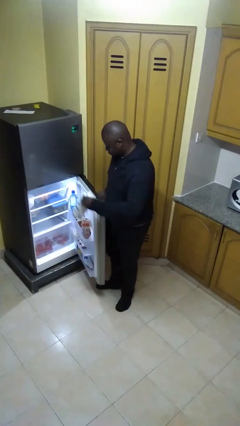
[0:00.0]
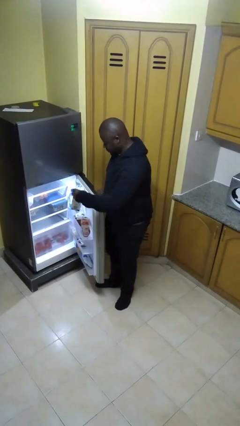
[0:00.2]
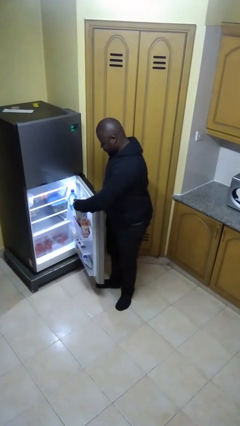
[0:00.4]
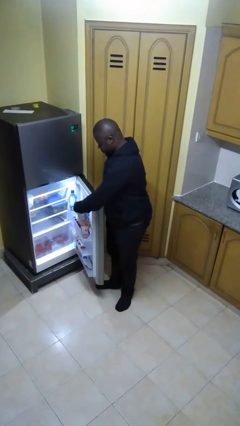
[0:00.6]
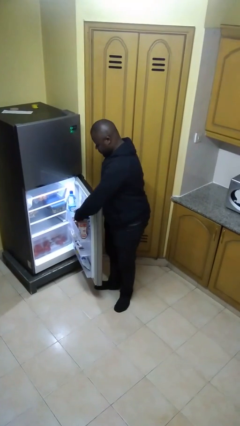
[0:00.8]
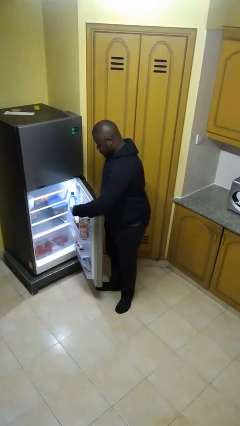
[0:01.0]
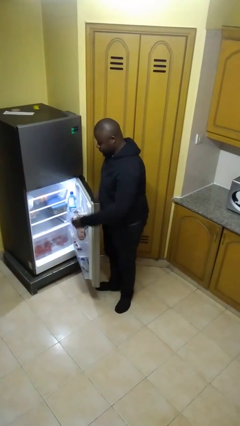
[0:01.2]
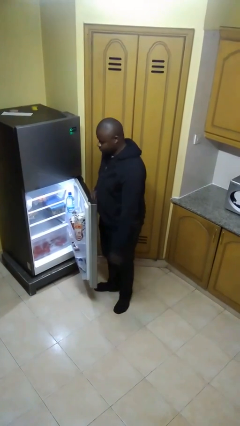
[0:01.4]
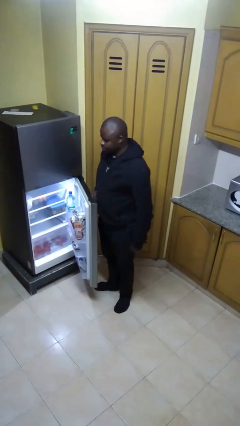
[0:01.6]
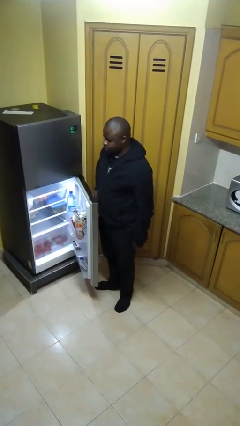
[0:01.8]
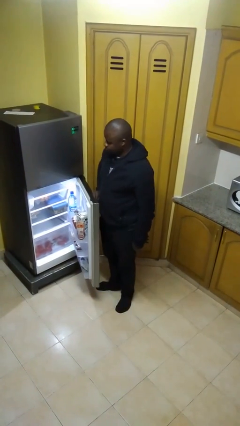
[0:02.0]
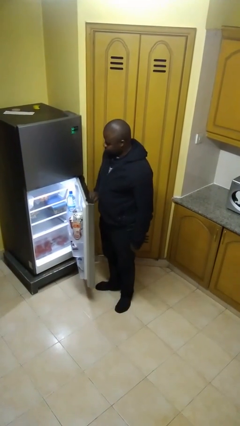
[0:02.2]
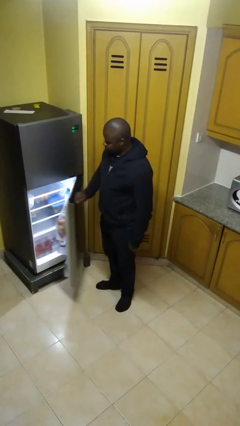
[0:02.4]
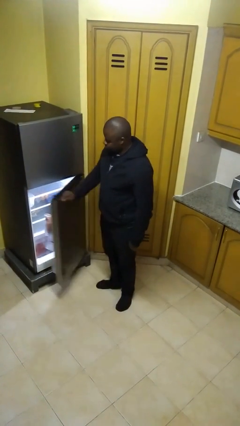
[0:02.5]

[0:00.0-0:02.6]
person puts object into refrigerator

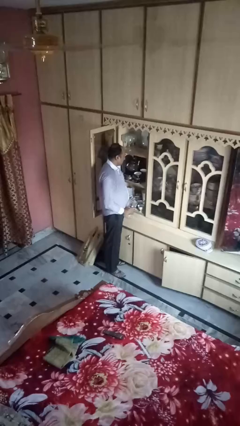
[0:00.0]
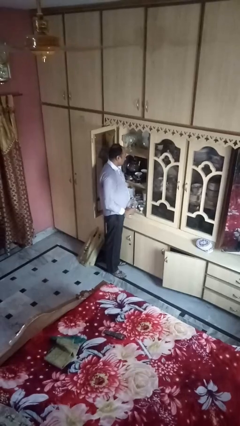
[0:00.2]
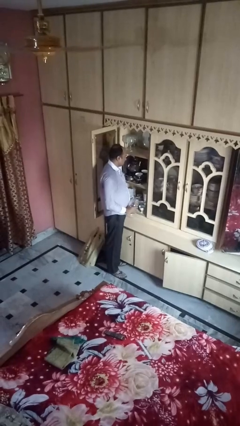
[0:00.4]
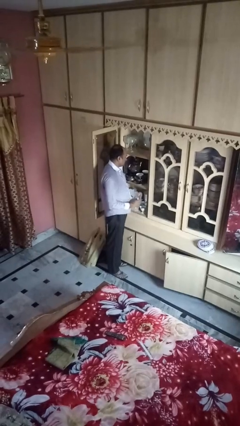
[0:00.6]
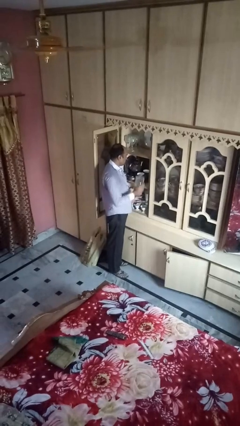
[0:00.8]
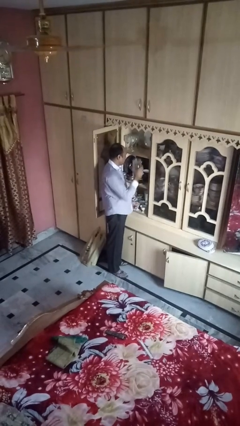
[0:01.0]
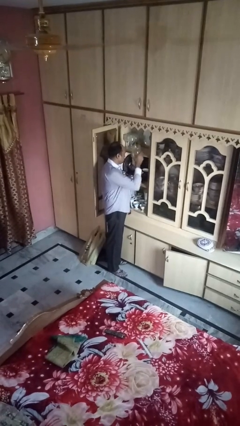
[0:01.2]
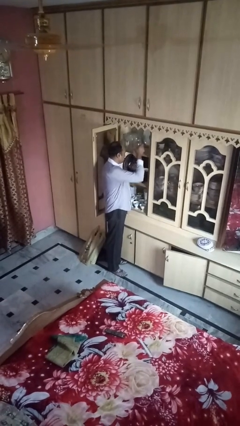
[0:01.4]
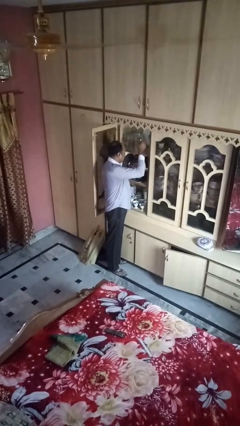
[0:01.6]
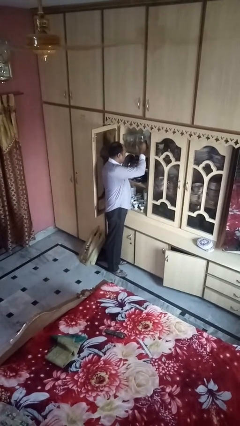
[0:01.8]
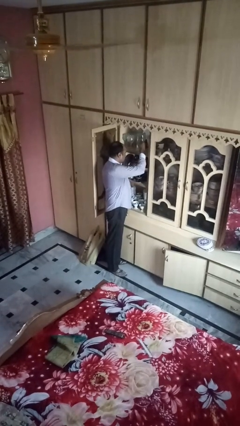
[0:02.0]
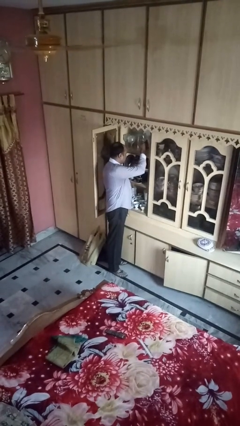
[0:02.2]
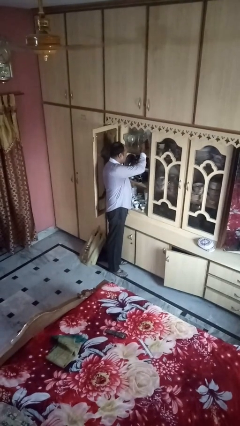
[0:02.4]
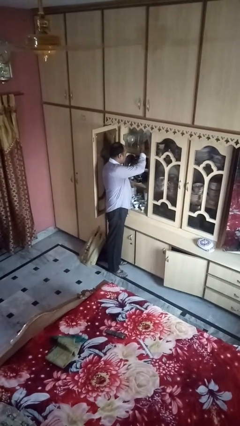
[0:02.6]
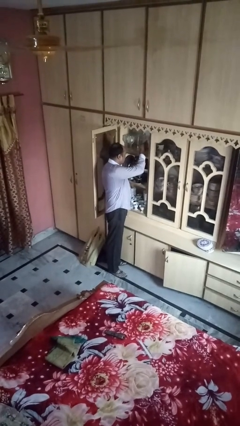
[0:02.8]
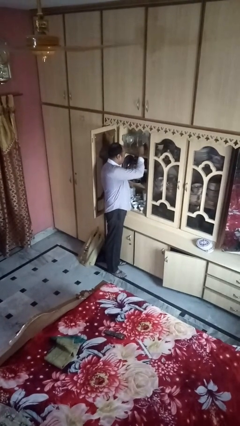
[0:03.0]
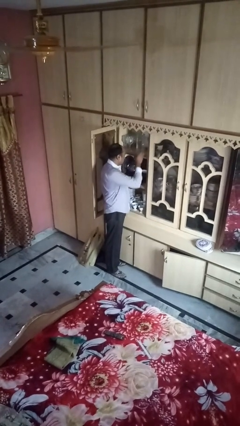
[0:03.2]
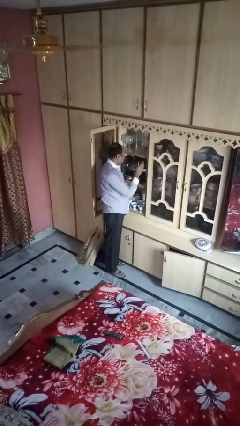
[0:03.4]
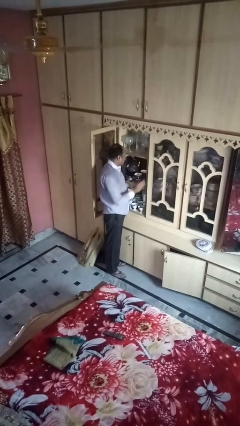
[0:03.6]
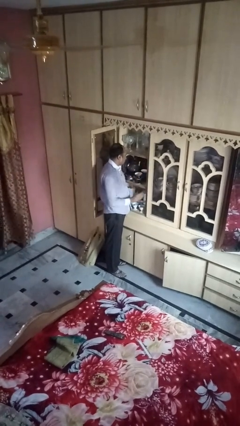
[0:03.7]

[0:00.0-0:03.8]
person puts down object into cabinet

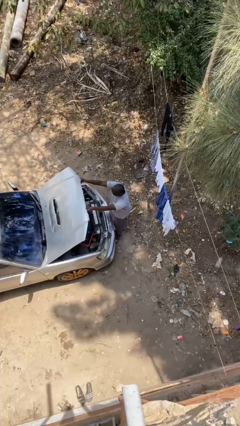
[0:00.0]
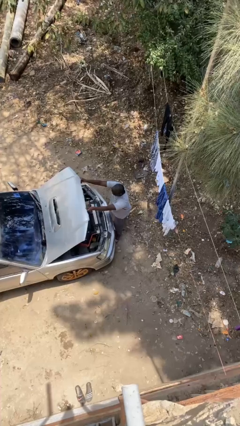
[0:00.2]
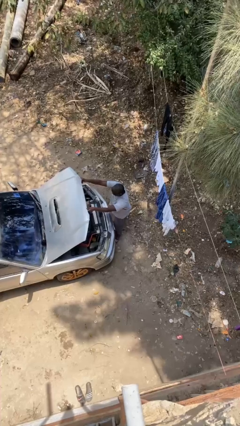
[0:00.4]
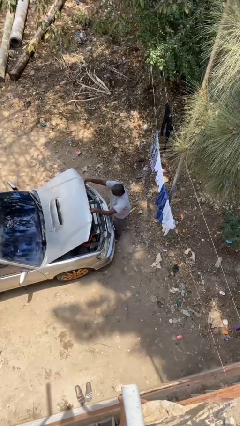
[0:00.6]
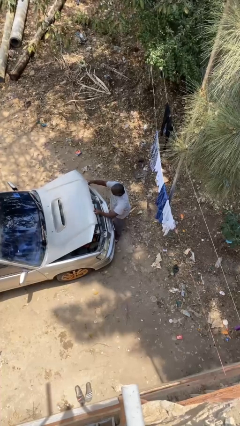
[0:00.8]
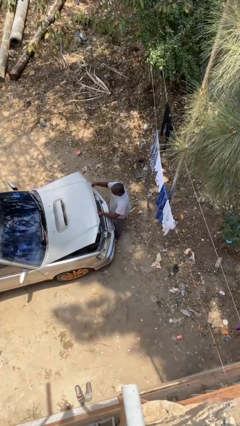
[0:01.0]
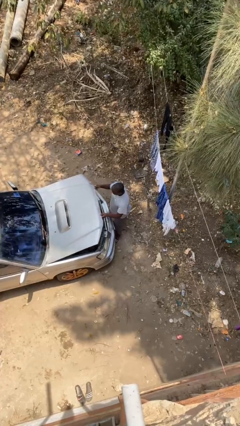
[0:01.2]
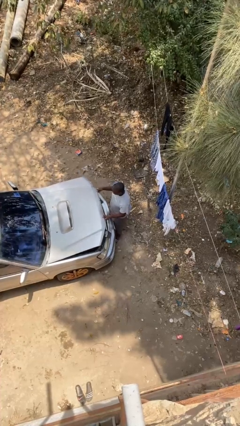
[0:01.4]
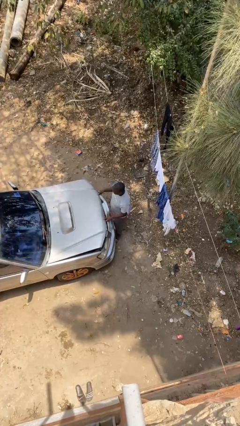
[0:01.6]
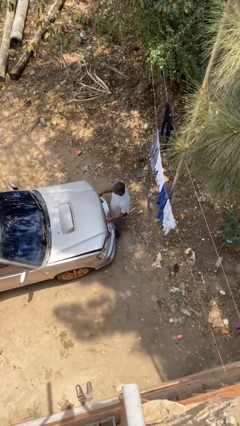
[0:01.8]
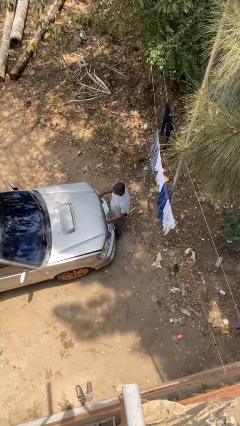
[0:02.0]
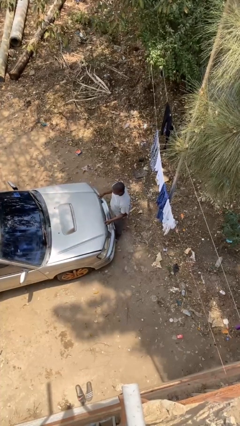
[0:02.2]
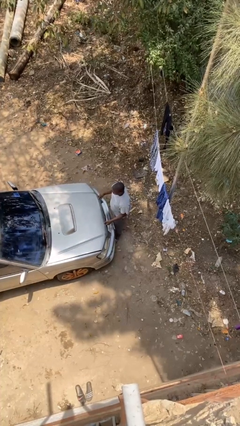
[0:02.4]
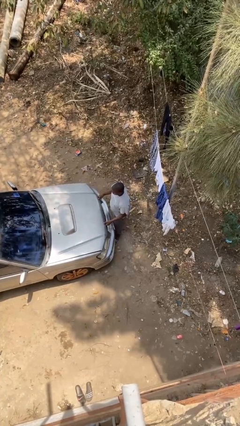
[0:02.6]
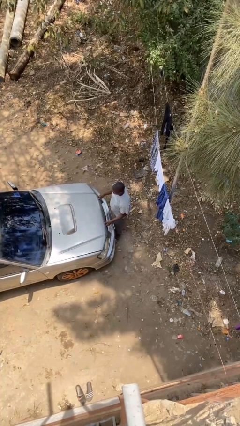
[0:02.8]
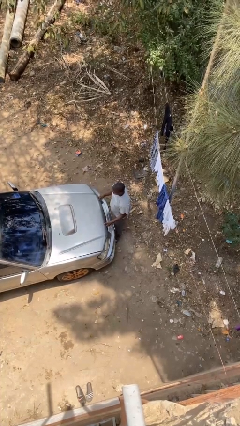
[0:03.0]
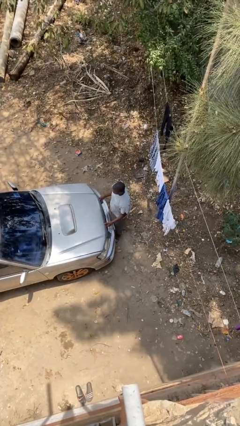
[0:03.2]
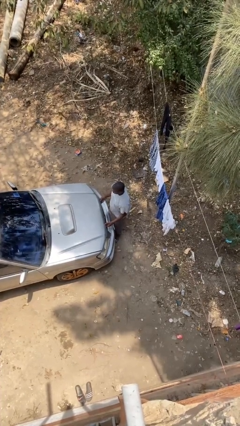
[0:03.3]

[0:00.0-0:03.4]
person closes car hood

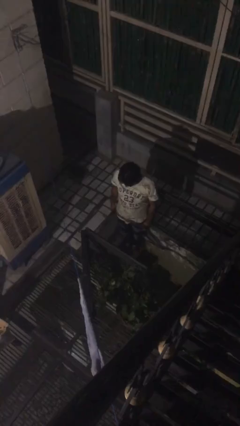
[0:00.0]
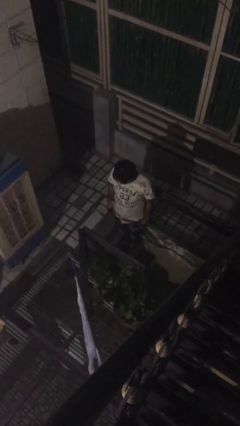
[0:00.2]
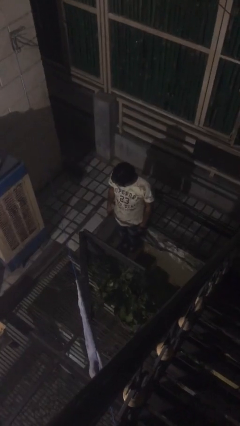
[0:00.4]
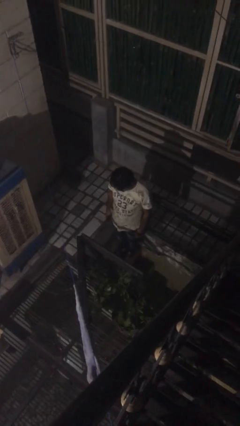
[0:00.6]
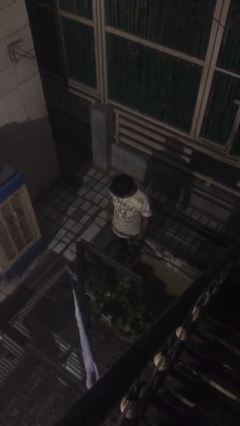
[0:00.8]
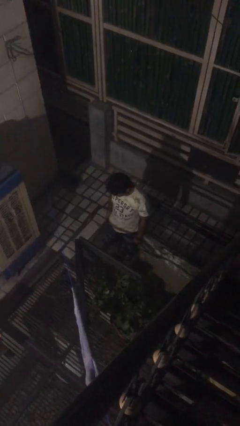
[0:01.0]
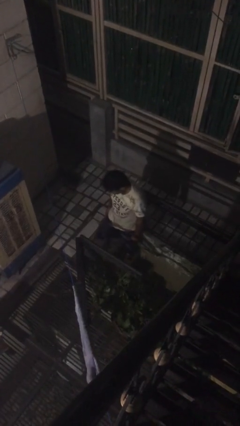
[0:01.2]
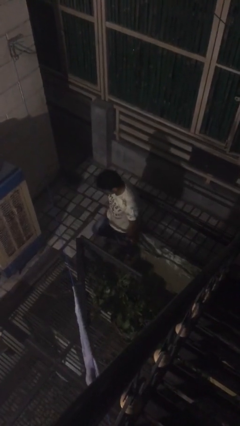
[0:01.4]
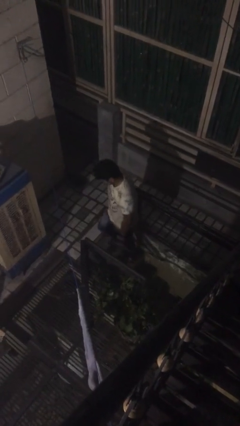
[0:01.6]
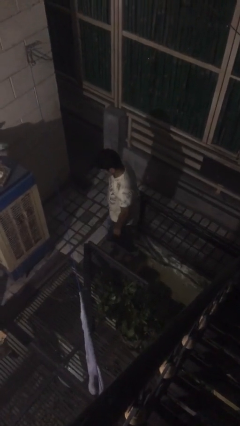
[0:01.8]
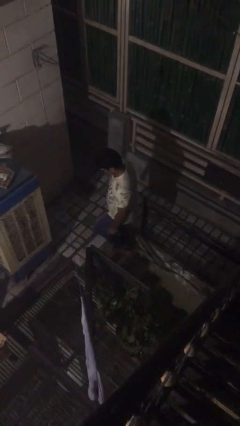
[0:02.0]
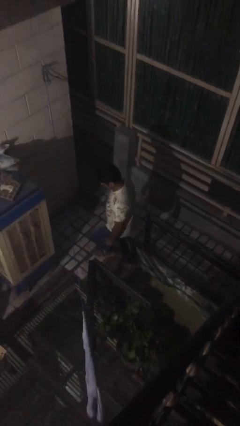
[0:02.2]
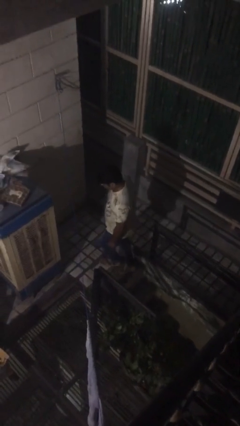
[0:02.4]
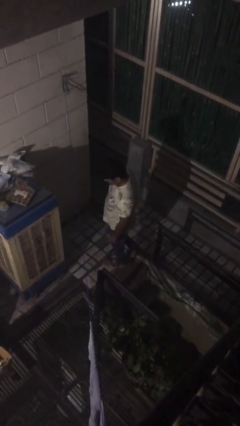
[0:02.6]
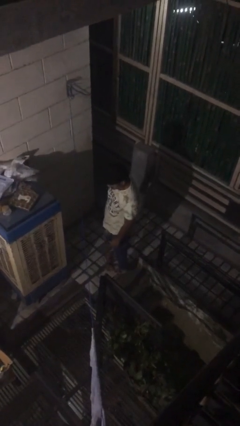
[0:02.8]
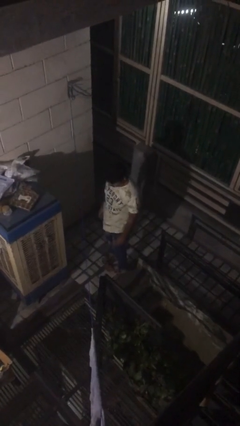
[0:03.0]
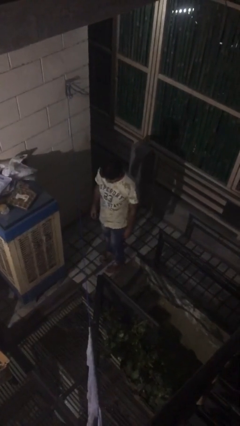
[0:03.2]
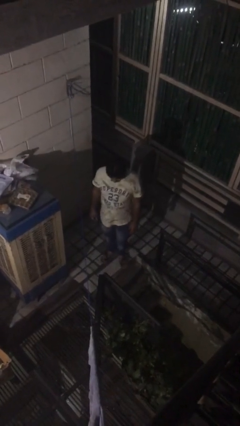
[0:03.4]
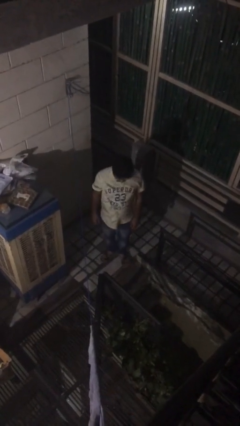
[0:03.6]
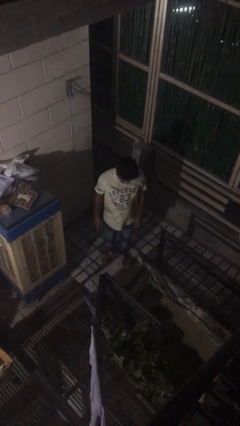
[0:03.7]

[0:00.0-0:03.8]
person climbs up stairs

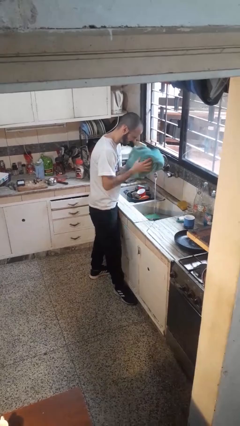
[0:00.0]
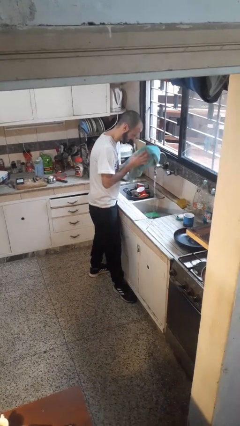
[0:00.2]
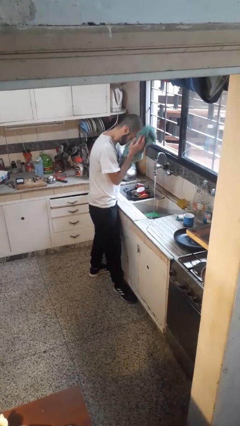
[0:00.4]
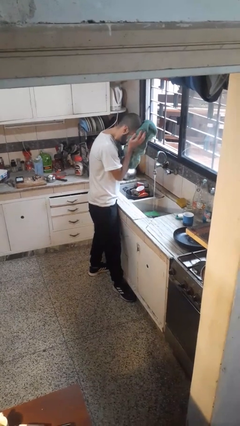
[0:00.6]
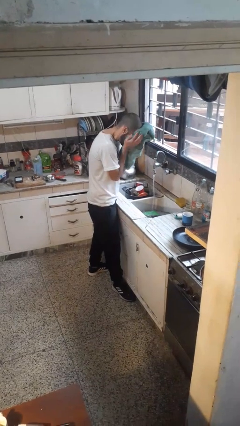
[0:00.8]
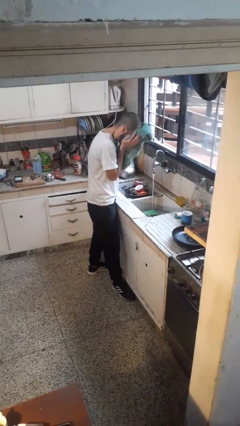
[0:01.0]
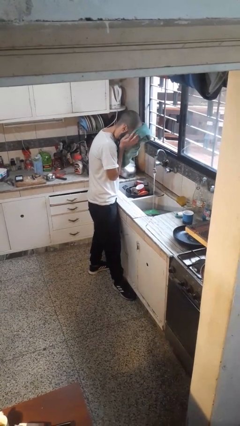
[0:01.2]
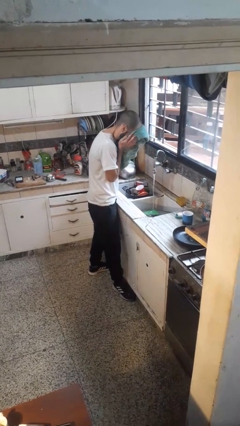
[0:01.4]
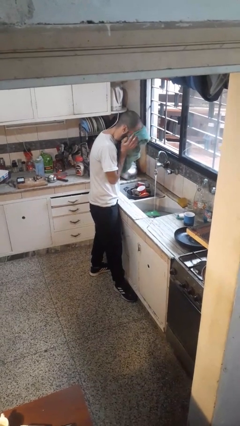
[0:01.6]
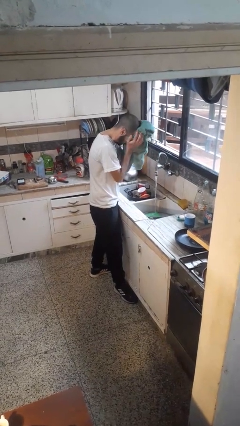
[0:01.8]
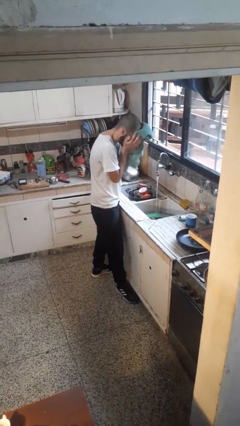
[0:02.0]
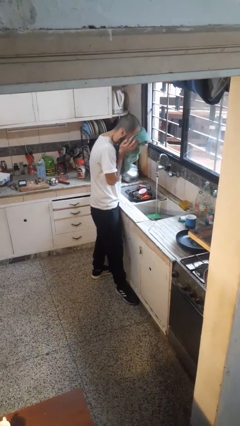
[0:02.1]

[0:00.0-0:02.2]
person dries face with towel

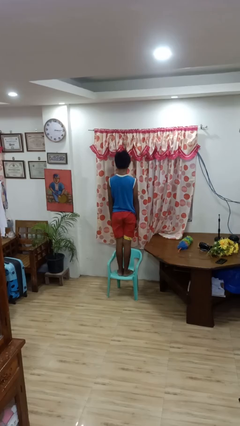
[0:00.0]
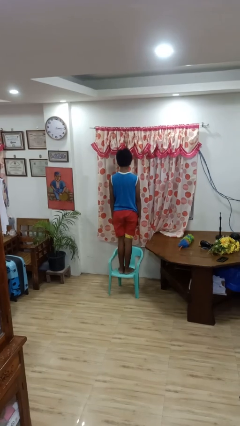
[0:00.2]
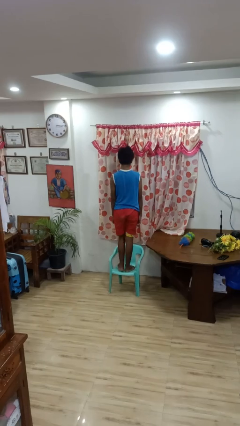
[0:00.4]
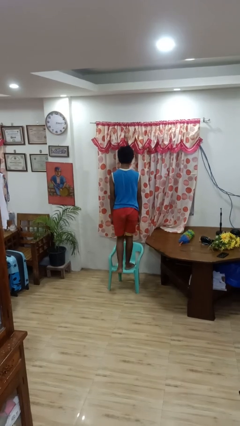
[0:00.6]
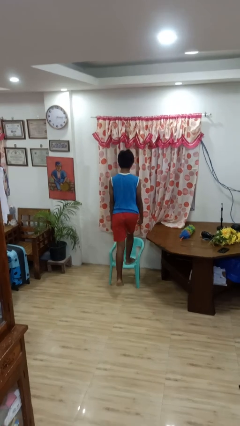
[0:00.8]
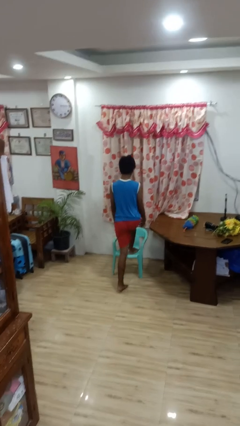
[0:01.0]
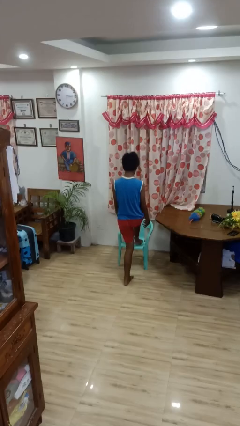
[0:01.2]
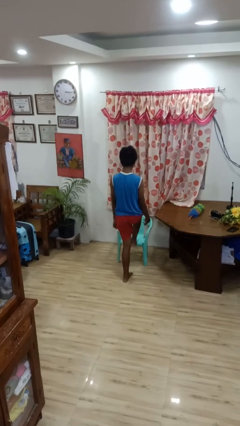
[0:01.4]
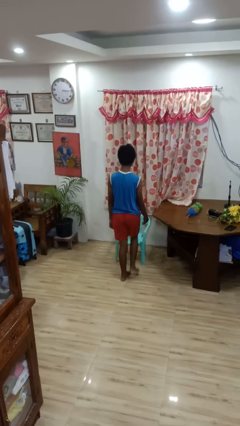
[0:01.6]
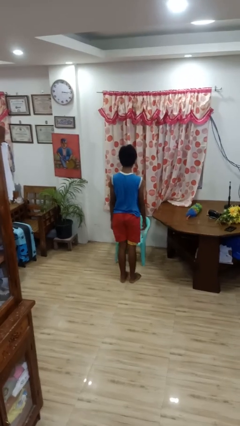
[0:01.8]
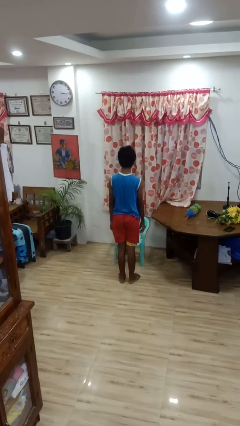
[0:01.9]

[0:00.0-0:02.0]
person climbs off chair
